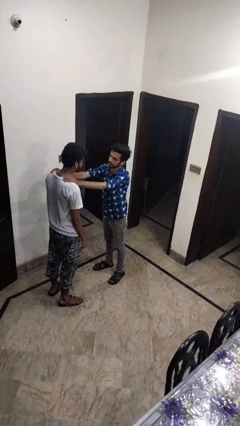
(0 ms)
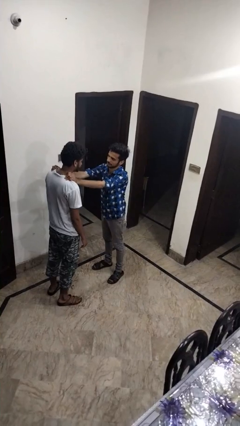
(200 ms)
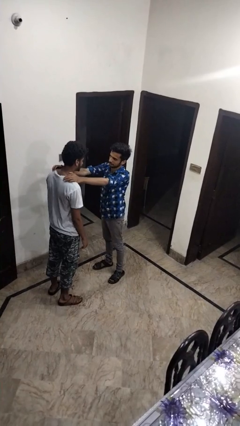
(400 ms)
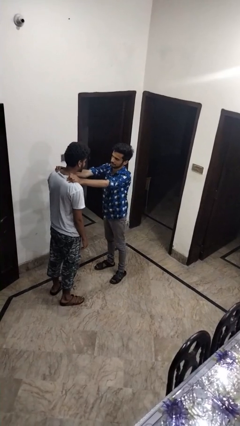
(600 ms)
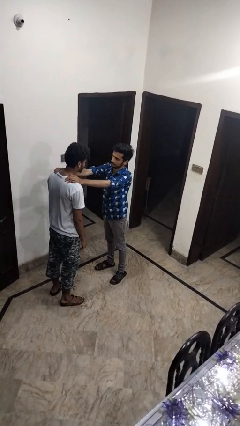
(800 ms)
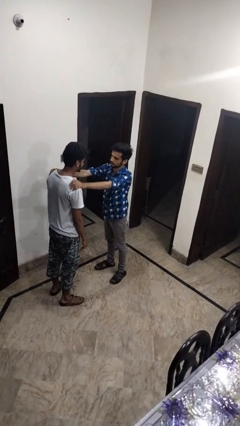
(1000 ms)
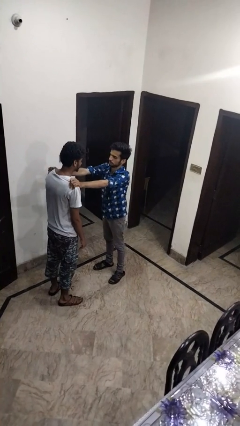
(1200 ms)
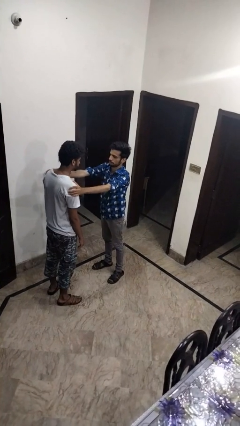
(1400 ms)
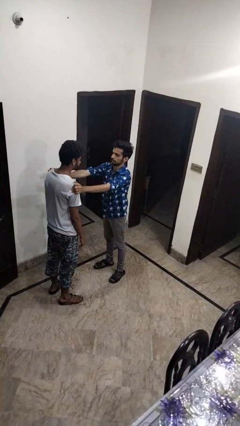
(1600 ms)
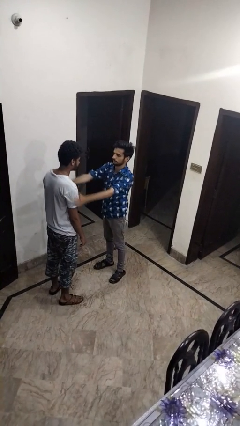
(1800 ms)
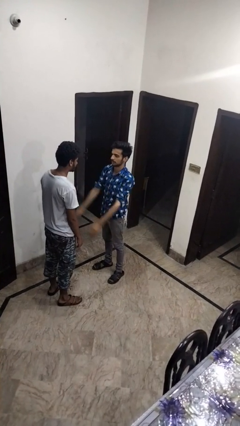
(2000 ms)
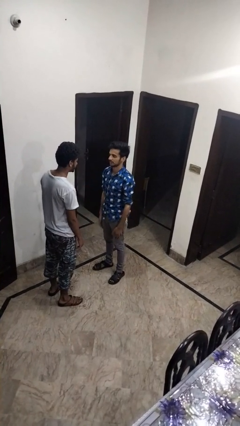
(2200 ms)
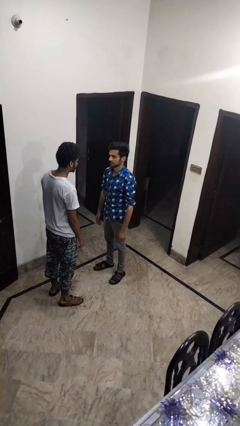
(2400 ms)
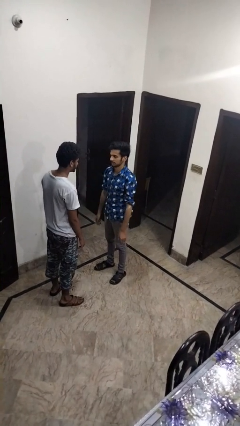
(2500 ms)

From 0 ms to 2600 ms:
person pounds shoulders of person

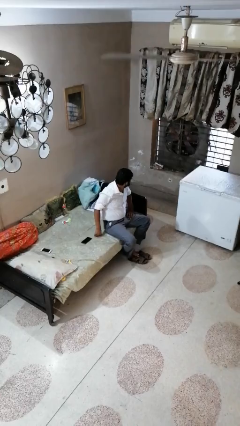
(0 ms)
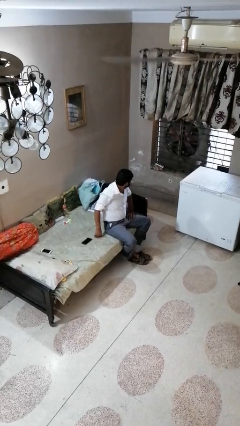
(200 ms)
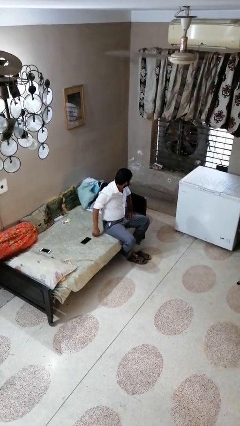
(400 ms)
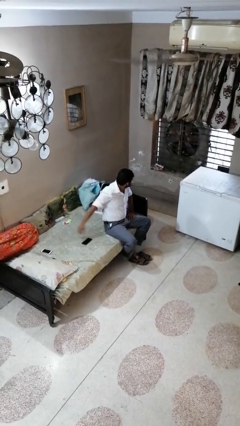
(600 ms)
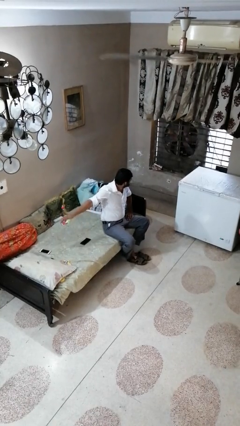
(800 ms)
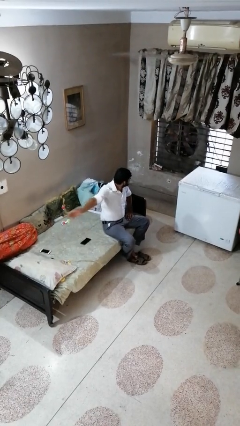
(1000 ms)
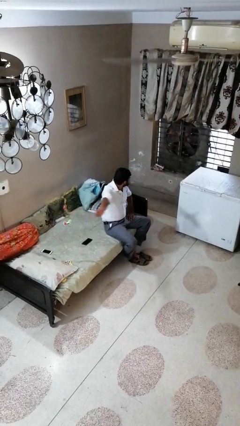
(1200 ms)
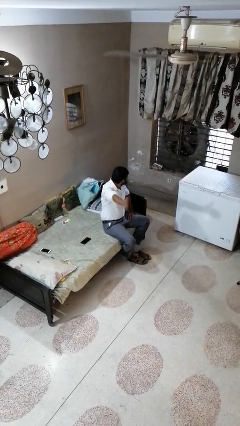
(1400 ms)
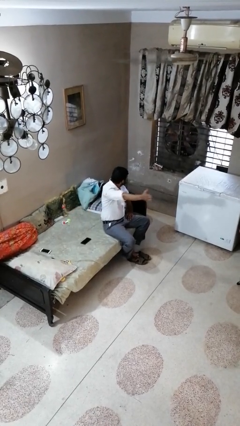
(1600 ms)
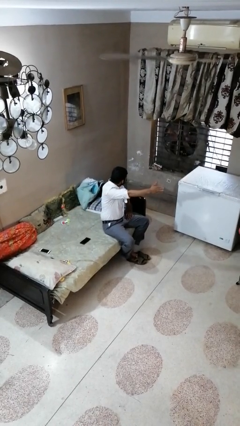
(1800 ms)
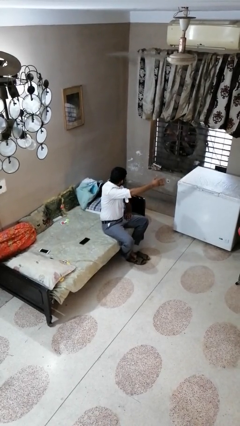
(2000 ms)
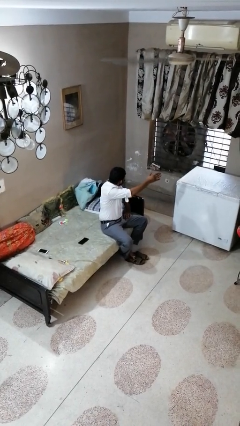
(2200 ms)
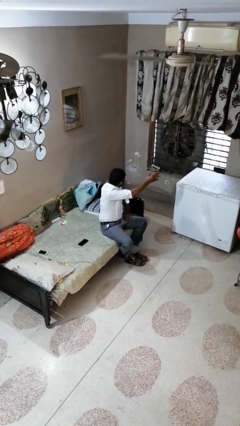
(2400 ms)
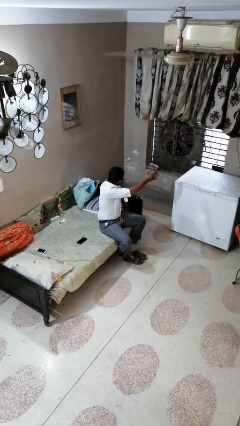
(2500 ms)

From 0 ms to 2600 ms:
person gestures swipe left

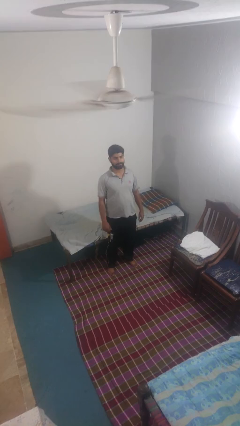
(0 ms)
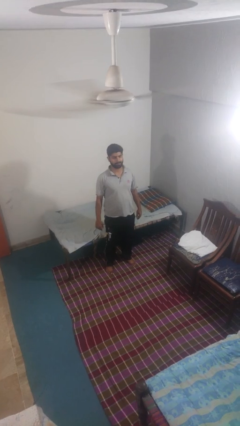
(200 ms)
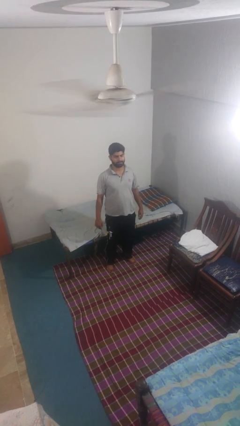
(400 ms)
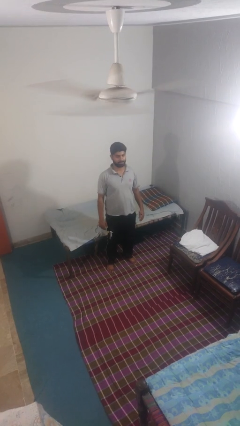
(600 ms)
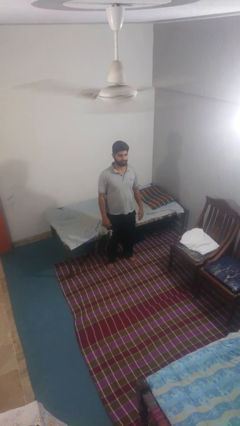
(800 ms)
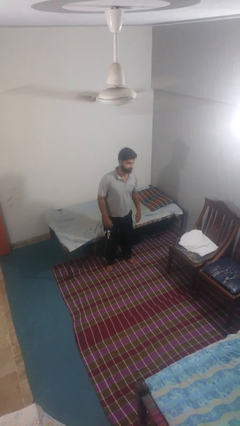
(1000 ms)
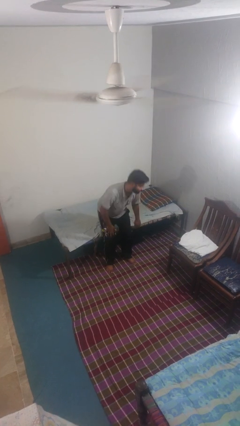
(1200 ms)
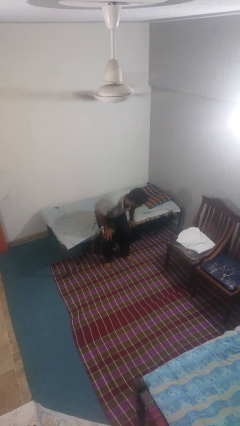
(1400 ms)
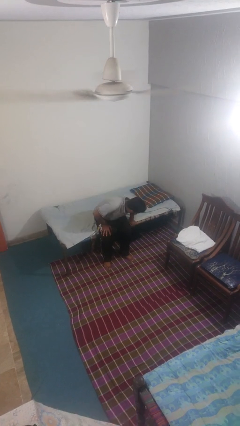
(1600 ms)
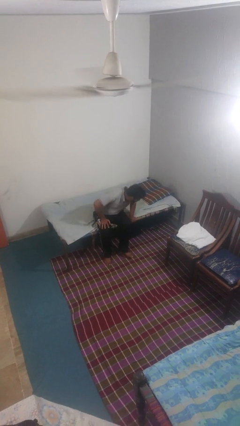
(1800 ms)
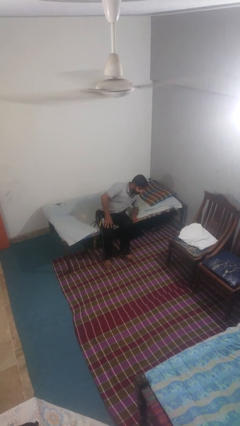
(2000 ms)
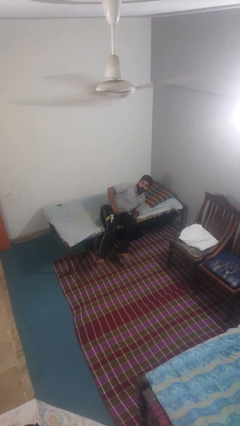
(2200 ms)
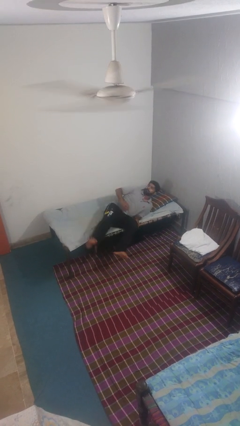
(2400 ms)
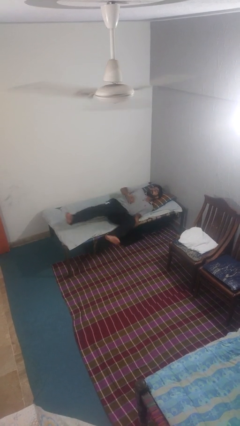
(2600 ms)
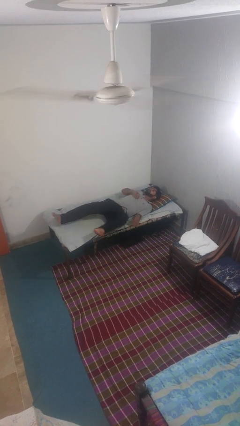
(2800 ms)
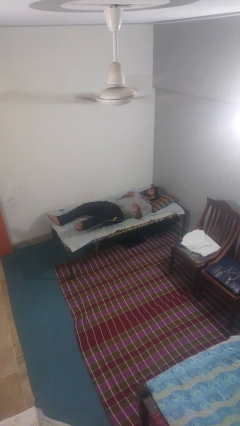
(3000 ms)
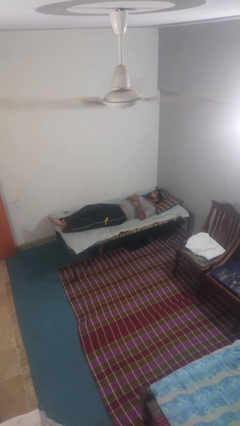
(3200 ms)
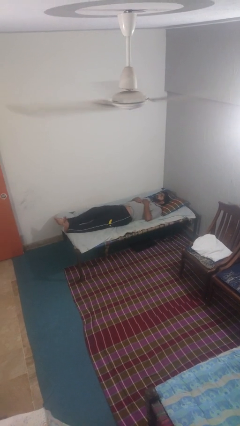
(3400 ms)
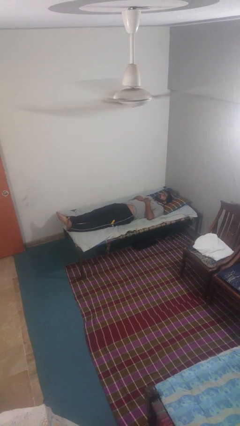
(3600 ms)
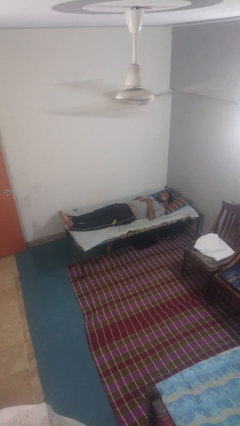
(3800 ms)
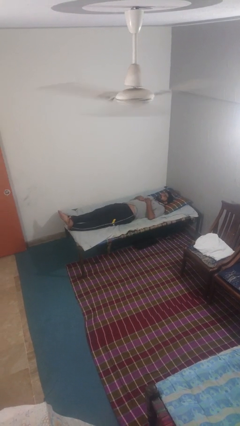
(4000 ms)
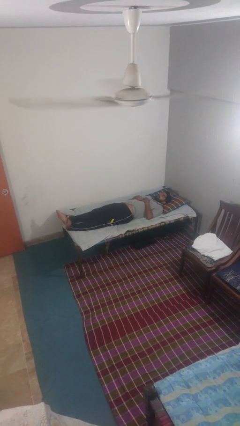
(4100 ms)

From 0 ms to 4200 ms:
person lies down on bed

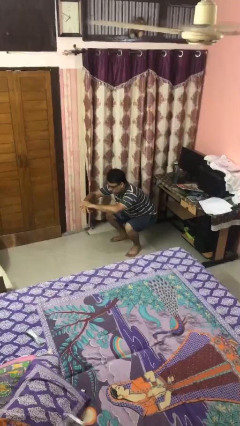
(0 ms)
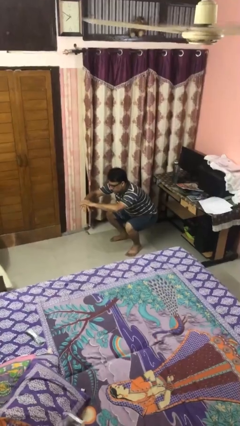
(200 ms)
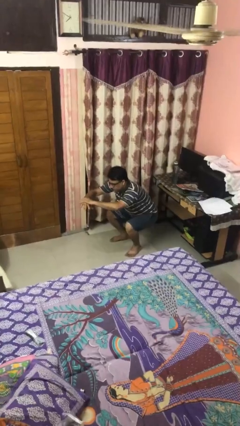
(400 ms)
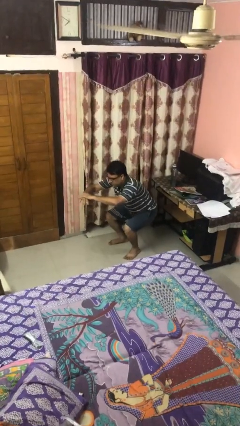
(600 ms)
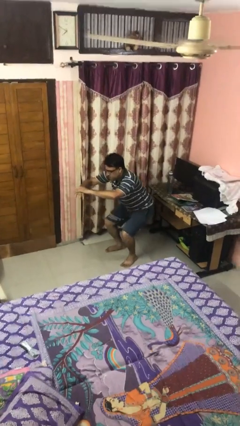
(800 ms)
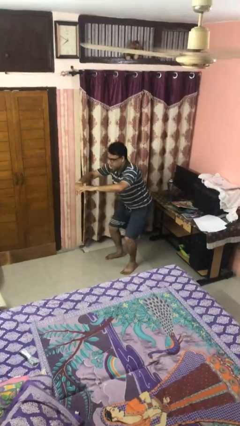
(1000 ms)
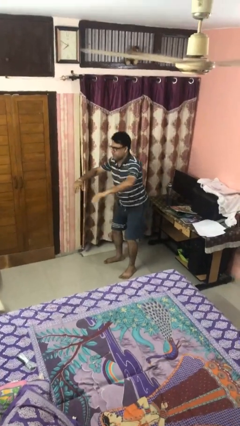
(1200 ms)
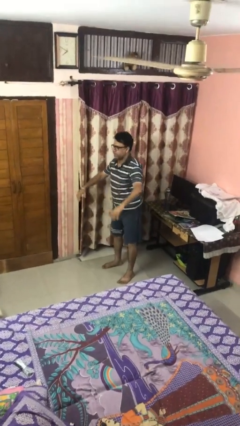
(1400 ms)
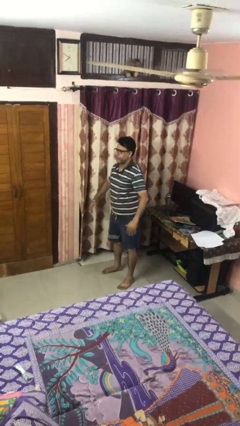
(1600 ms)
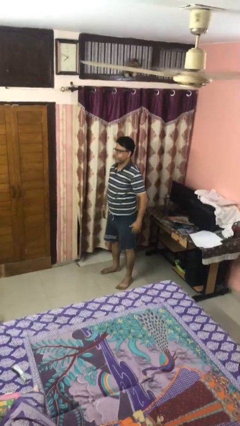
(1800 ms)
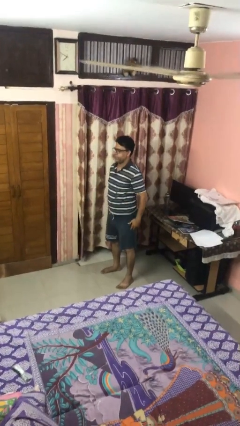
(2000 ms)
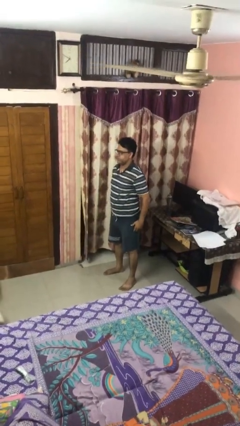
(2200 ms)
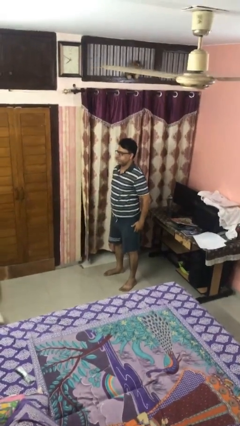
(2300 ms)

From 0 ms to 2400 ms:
person stands up

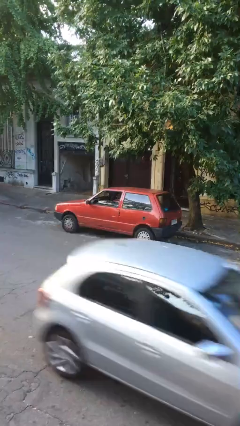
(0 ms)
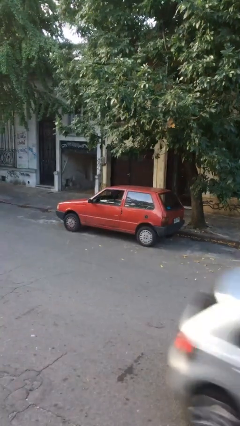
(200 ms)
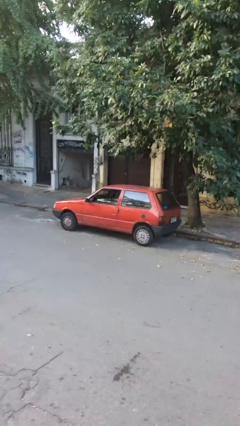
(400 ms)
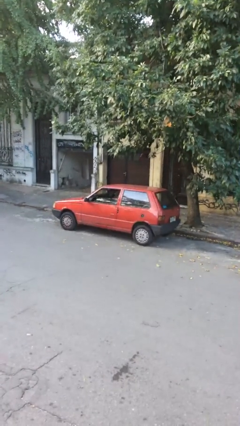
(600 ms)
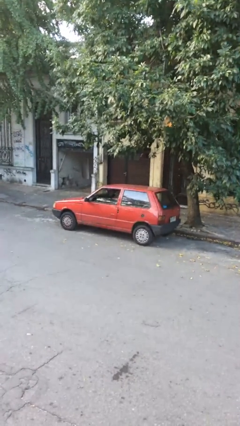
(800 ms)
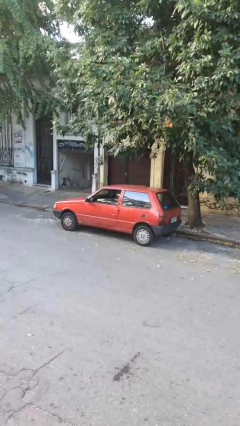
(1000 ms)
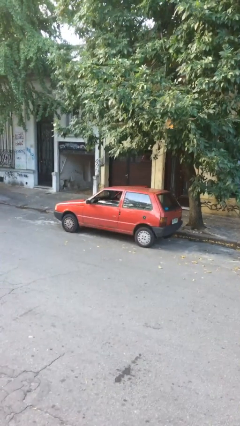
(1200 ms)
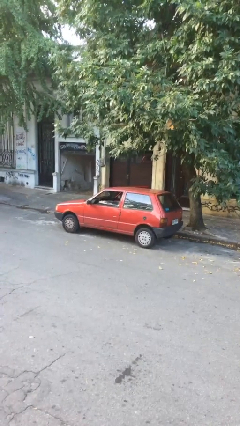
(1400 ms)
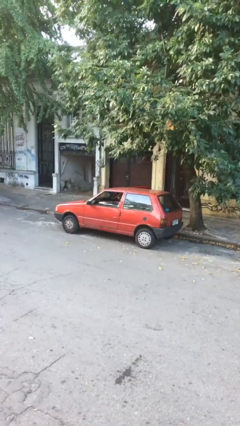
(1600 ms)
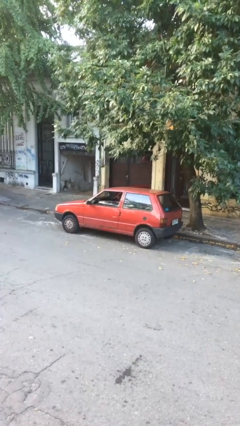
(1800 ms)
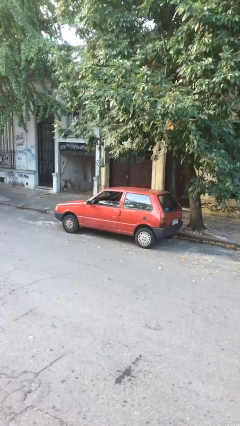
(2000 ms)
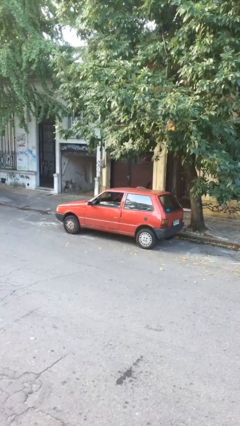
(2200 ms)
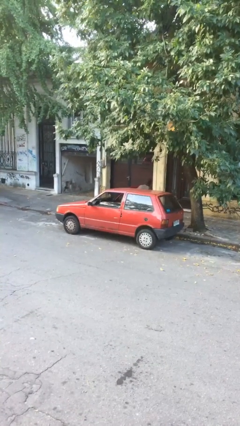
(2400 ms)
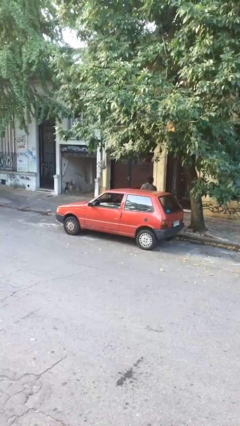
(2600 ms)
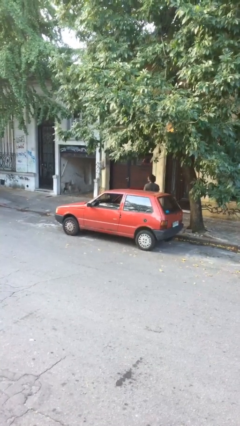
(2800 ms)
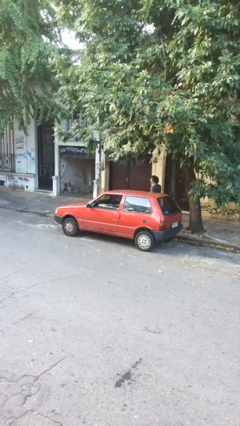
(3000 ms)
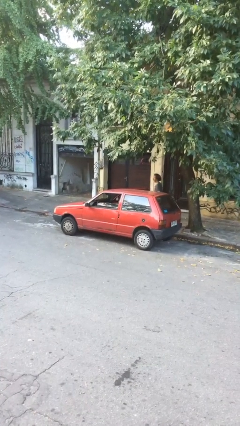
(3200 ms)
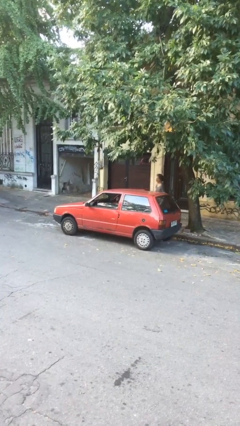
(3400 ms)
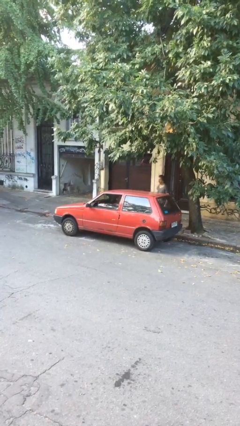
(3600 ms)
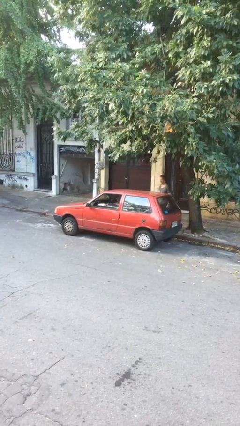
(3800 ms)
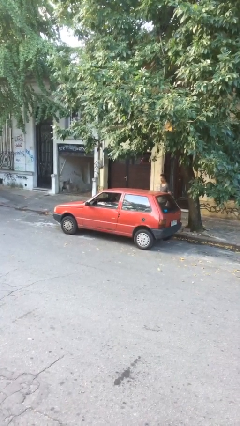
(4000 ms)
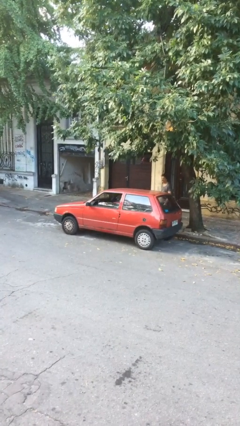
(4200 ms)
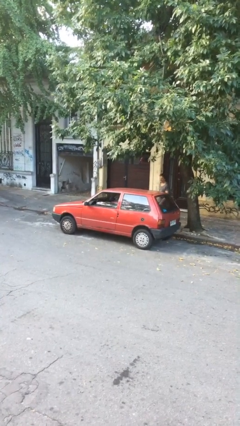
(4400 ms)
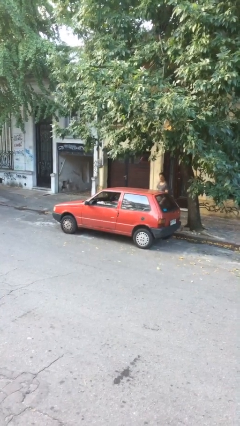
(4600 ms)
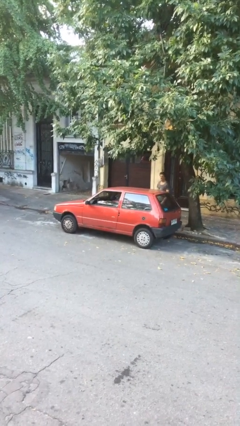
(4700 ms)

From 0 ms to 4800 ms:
car drops off person

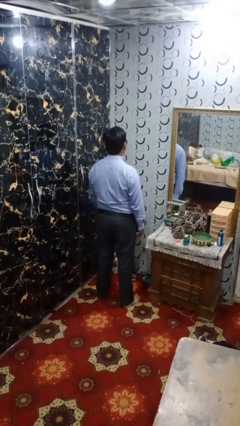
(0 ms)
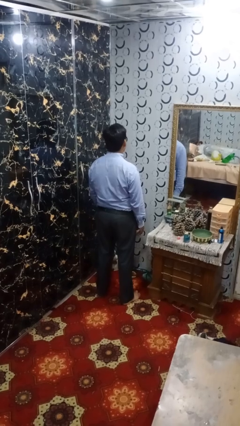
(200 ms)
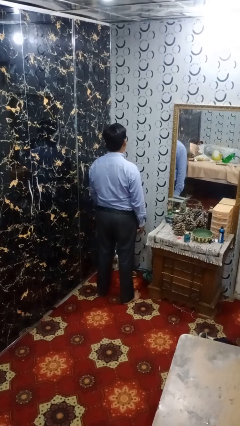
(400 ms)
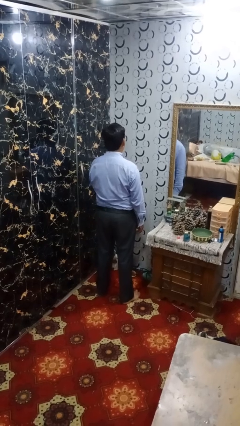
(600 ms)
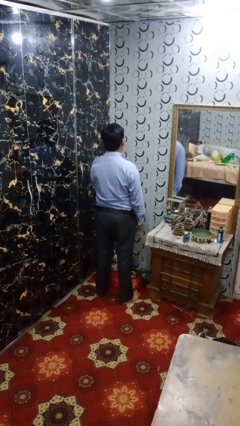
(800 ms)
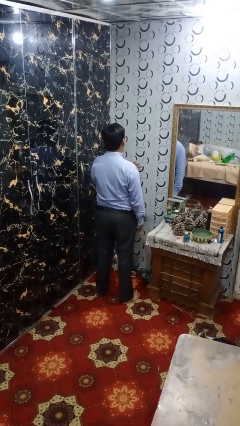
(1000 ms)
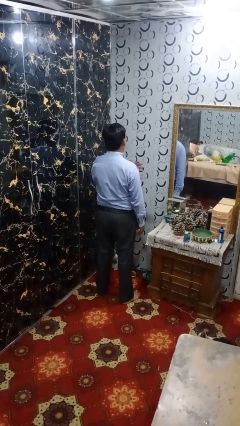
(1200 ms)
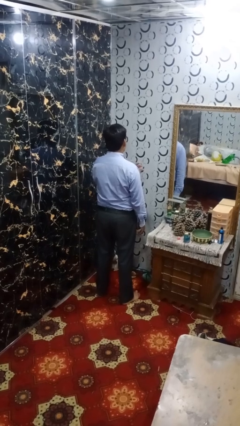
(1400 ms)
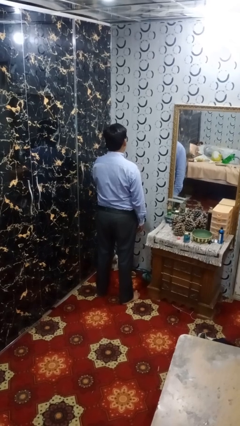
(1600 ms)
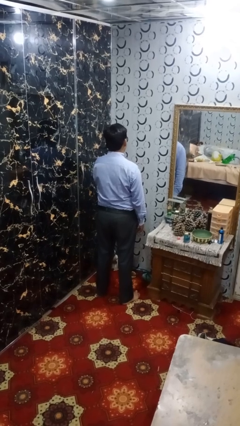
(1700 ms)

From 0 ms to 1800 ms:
person drums on chest
